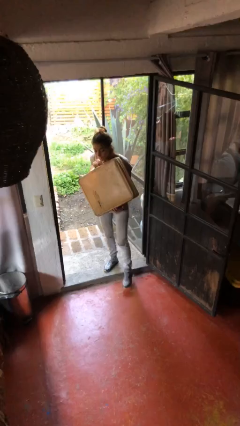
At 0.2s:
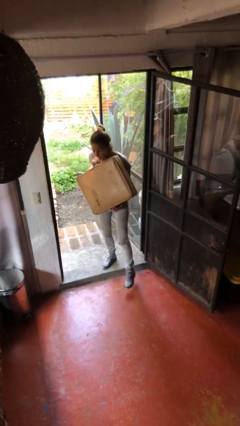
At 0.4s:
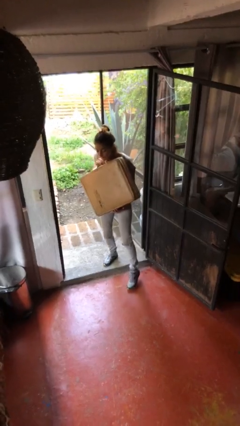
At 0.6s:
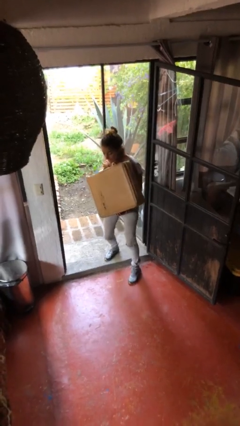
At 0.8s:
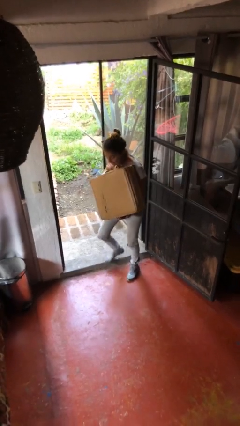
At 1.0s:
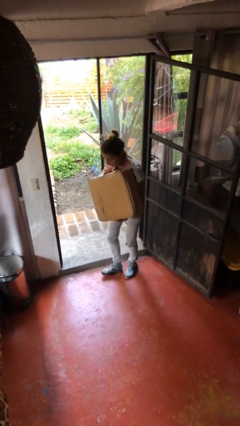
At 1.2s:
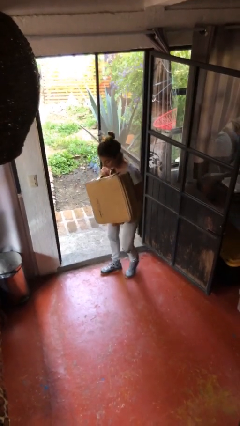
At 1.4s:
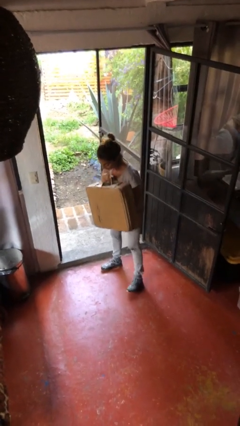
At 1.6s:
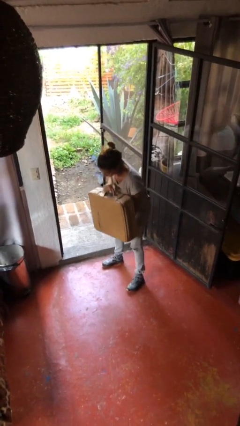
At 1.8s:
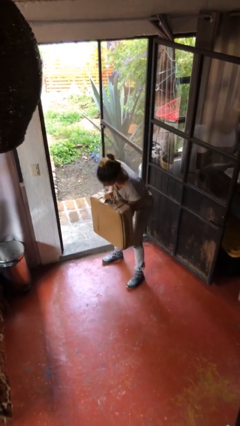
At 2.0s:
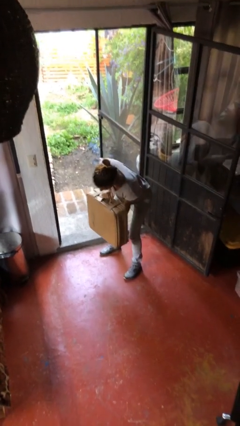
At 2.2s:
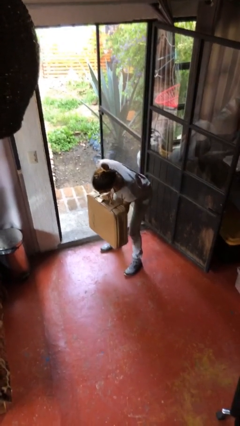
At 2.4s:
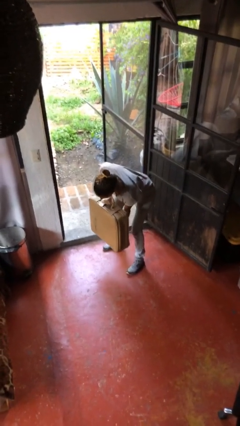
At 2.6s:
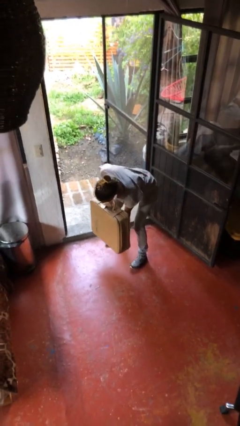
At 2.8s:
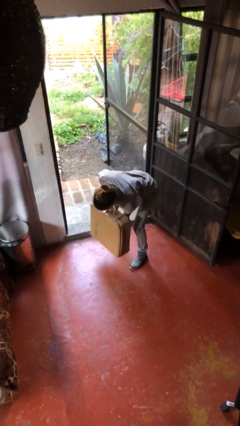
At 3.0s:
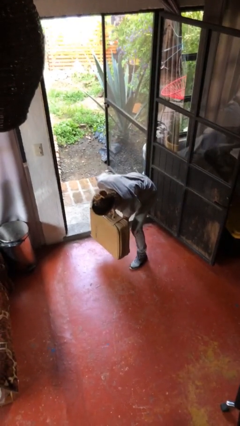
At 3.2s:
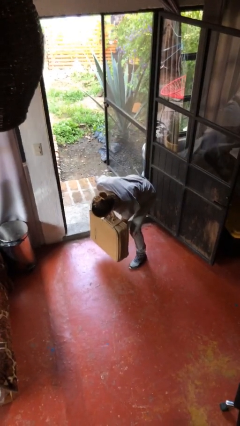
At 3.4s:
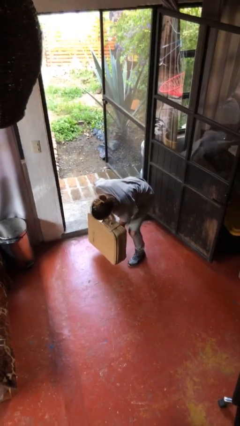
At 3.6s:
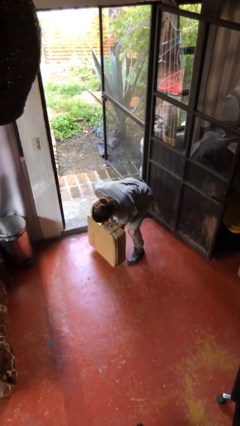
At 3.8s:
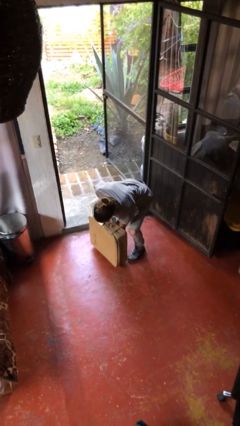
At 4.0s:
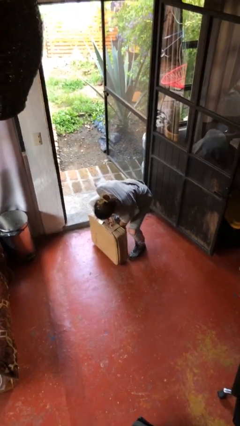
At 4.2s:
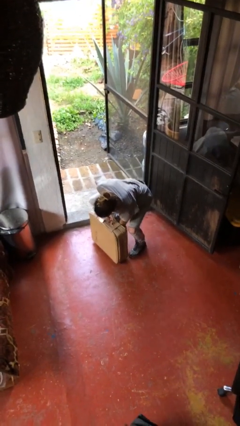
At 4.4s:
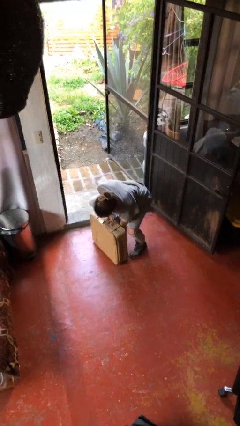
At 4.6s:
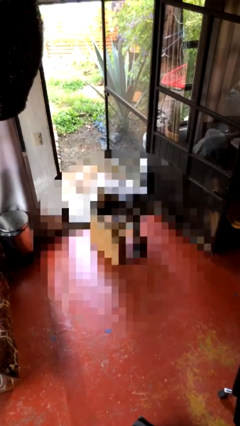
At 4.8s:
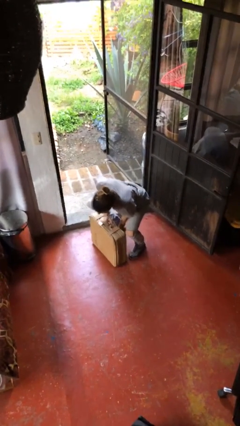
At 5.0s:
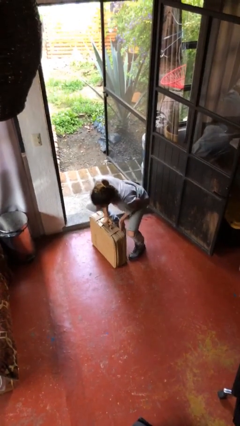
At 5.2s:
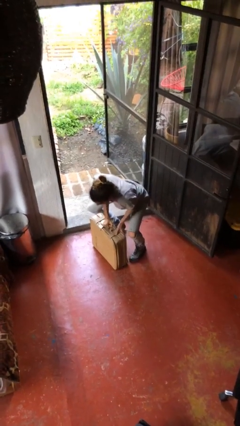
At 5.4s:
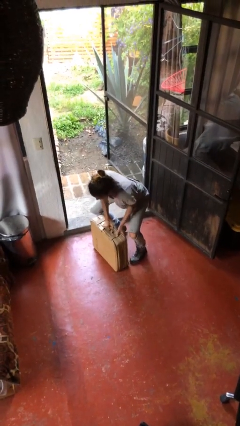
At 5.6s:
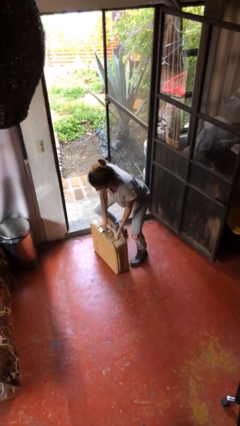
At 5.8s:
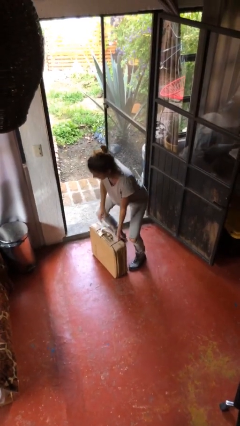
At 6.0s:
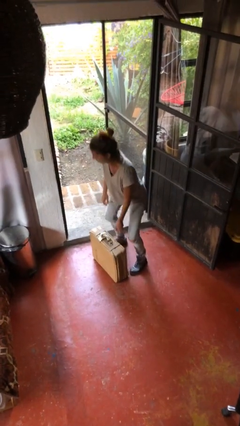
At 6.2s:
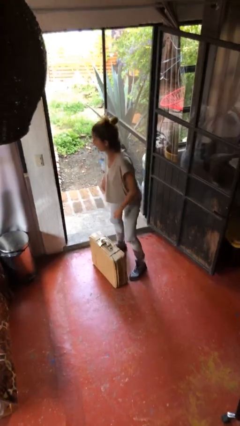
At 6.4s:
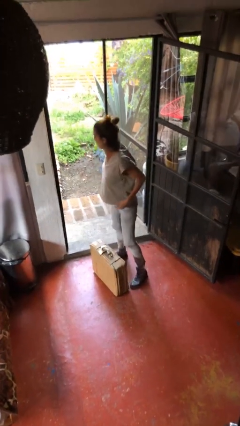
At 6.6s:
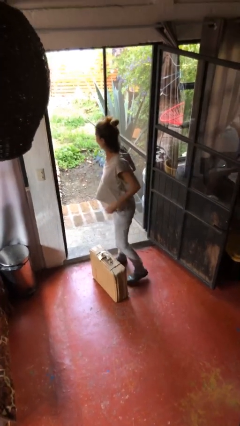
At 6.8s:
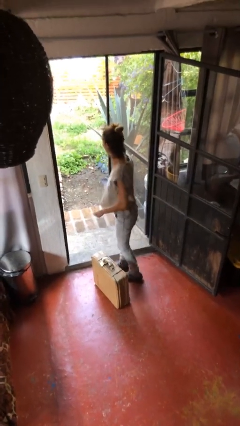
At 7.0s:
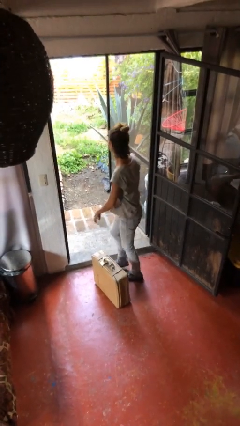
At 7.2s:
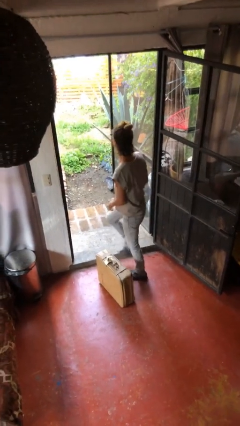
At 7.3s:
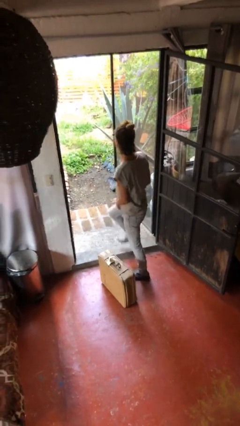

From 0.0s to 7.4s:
person puts down object on floor

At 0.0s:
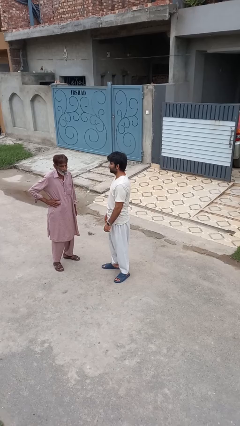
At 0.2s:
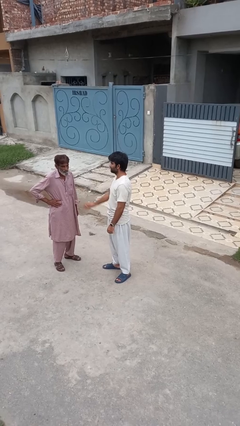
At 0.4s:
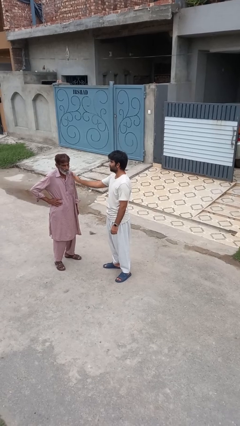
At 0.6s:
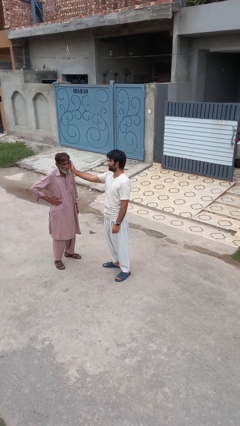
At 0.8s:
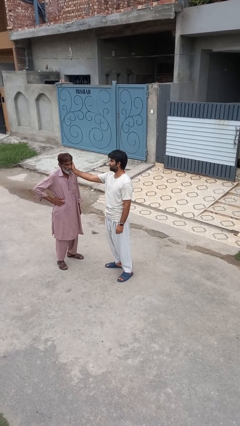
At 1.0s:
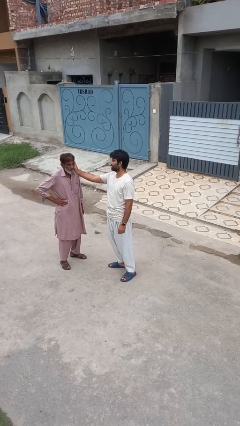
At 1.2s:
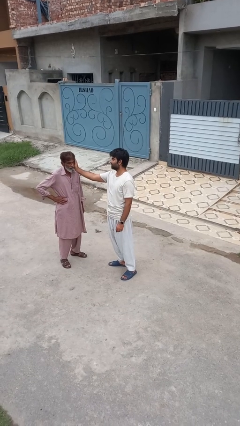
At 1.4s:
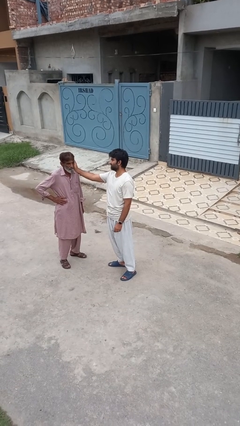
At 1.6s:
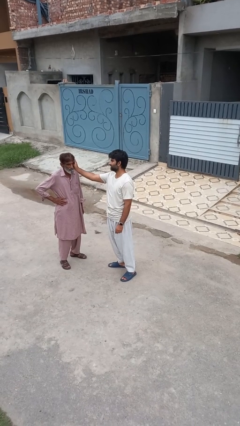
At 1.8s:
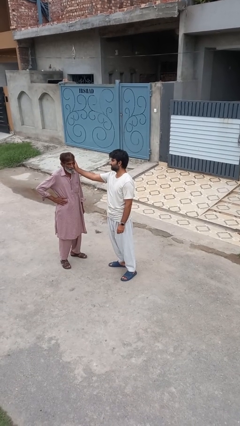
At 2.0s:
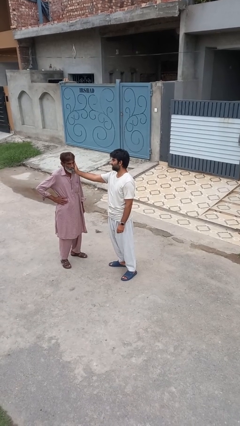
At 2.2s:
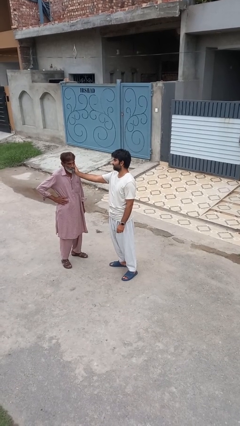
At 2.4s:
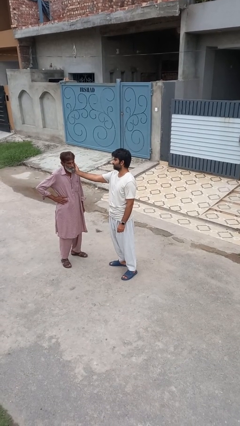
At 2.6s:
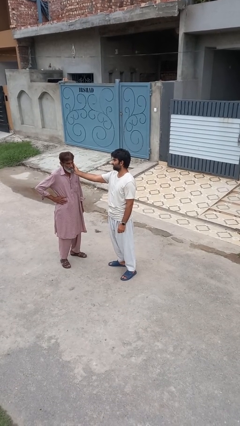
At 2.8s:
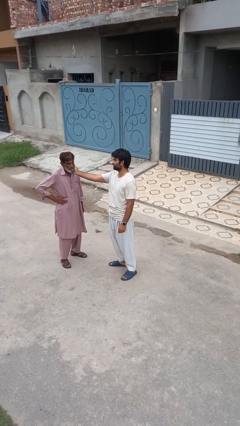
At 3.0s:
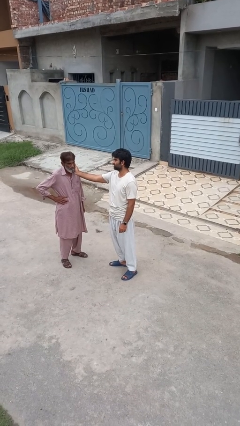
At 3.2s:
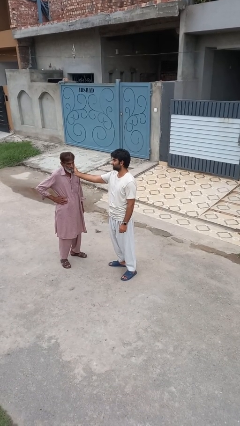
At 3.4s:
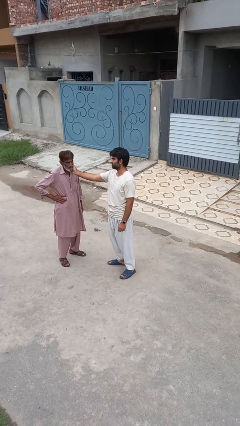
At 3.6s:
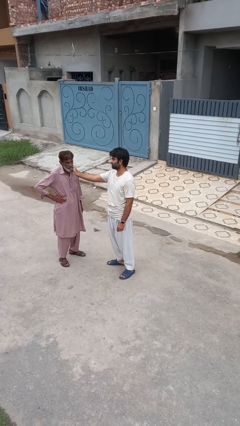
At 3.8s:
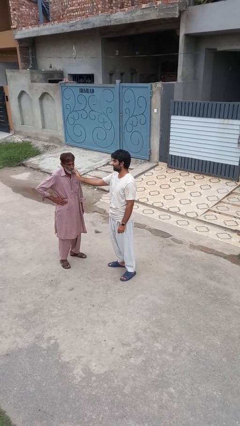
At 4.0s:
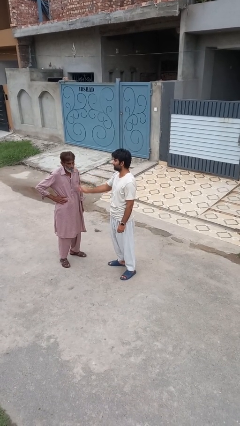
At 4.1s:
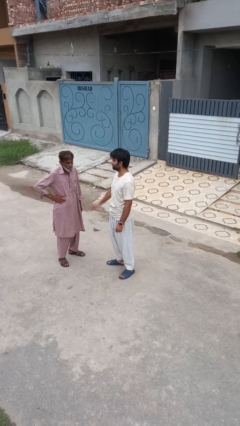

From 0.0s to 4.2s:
person touches face of person

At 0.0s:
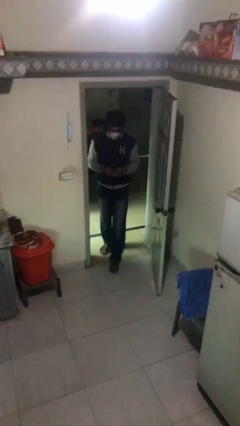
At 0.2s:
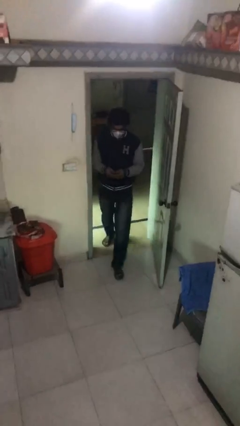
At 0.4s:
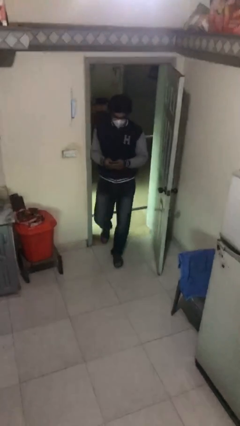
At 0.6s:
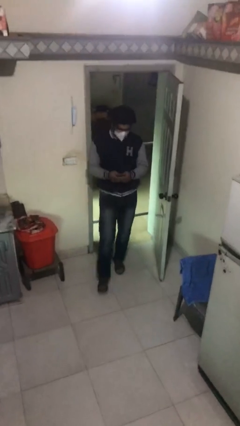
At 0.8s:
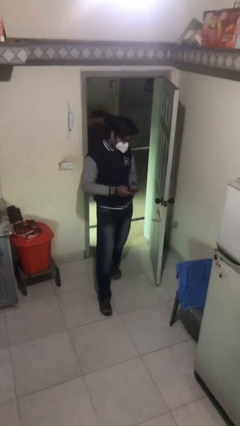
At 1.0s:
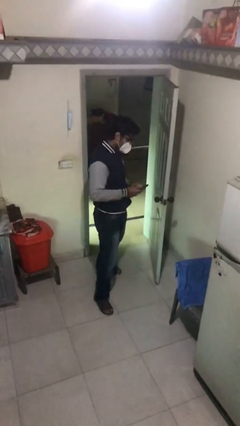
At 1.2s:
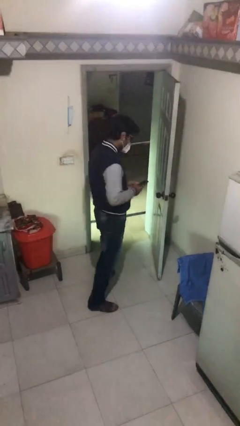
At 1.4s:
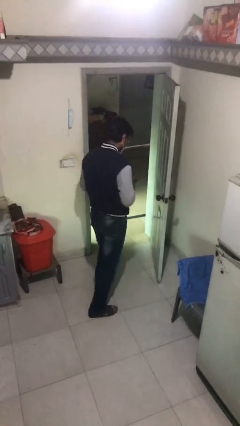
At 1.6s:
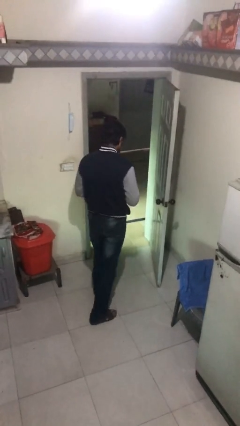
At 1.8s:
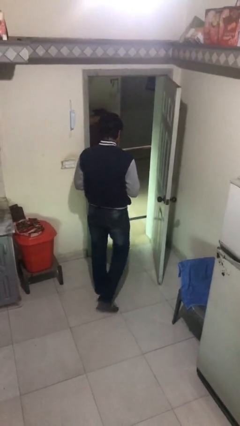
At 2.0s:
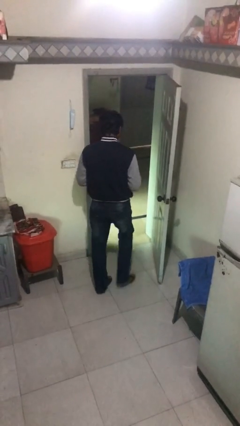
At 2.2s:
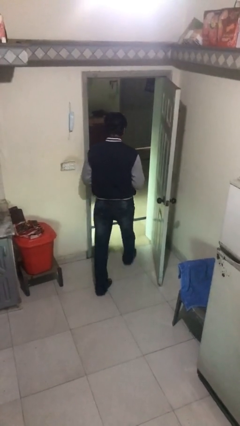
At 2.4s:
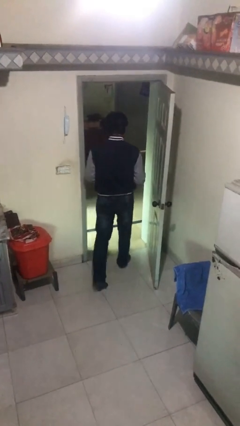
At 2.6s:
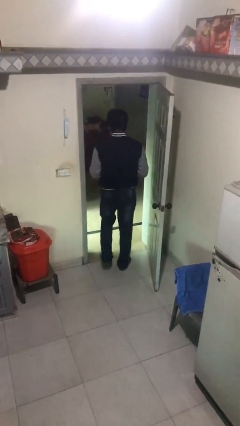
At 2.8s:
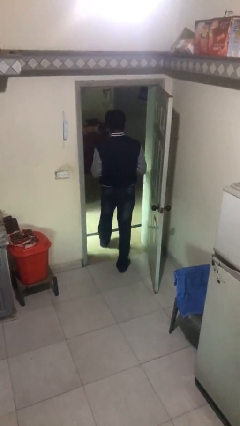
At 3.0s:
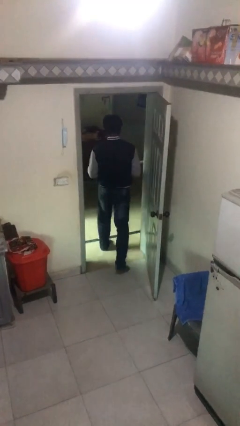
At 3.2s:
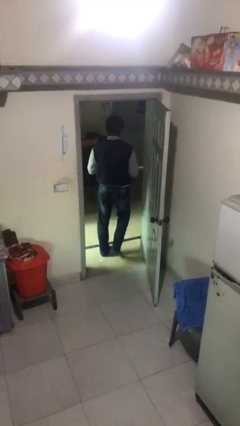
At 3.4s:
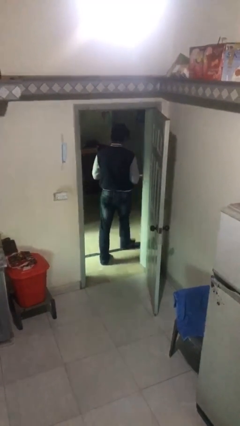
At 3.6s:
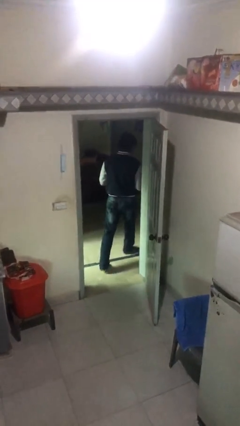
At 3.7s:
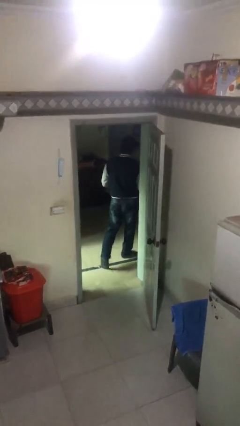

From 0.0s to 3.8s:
person exits scene through structure

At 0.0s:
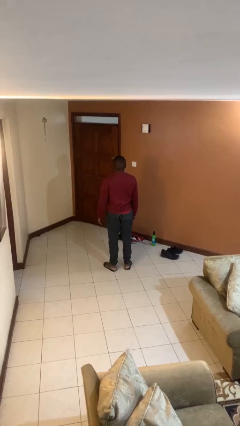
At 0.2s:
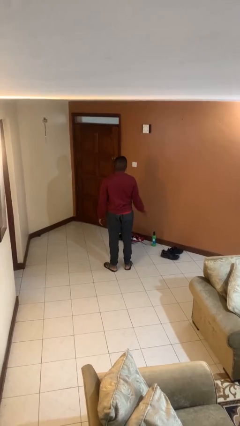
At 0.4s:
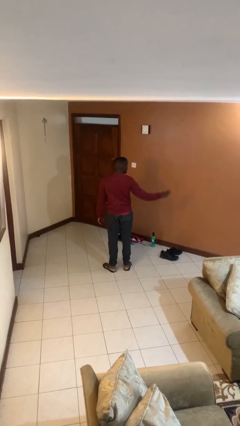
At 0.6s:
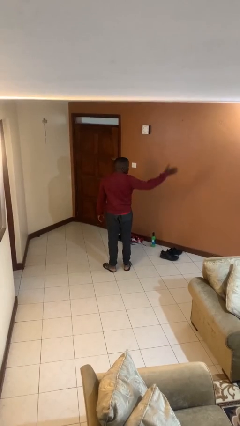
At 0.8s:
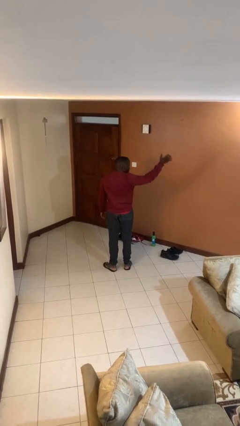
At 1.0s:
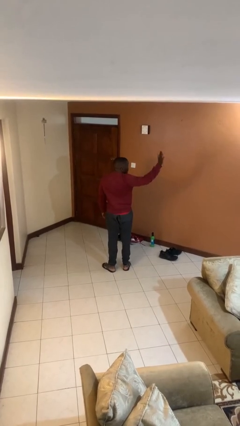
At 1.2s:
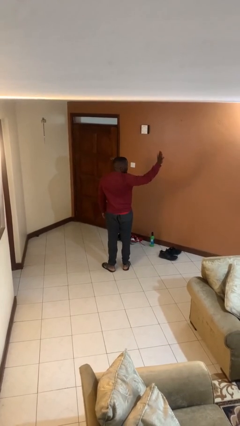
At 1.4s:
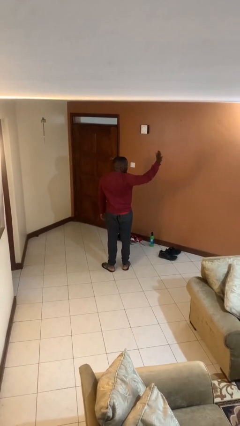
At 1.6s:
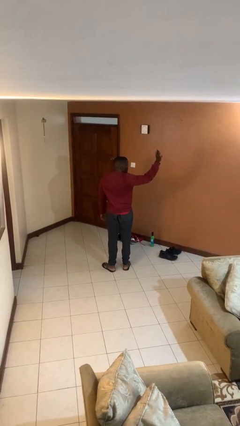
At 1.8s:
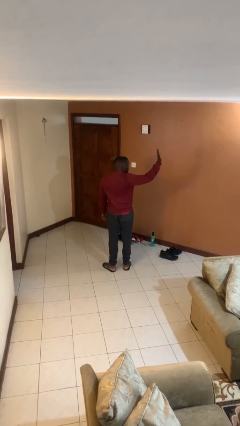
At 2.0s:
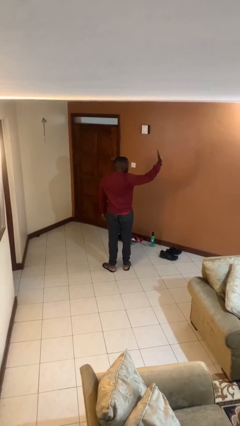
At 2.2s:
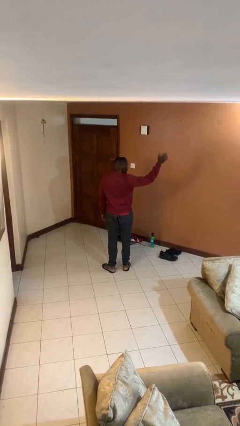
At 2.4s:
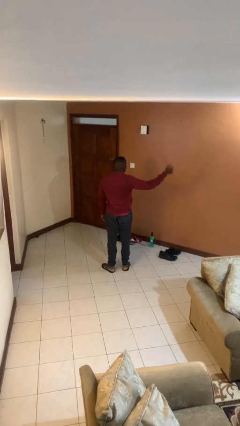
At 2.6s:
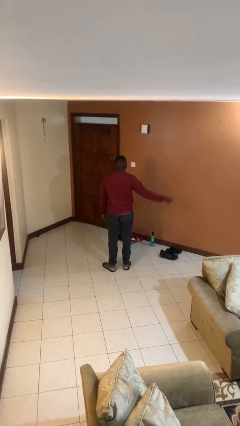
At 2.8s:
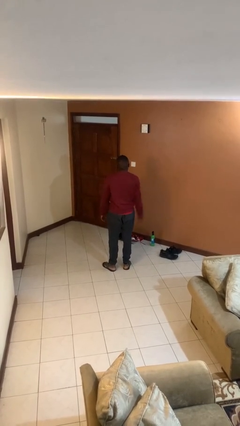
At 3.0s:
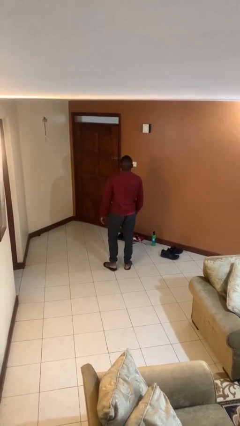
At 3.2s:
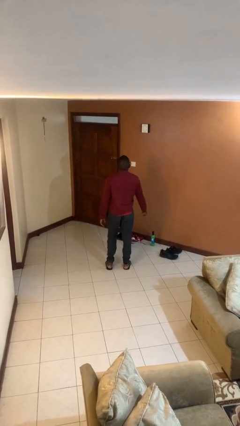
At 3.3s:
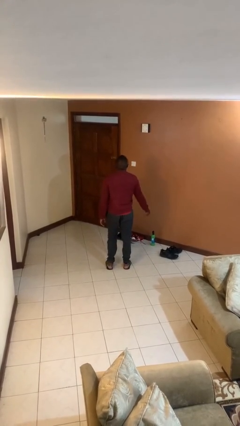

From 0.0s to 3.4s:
person waves at person
